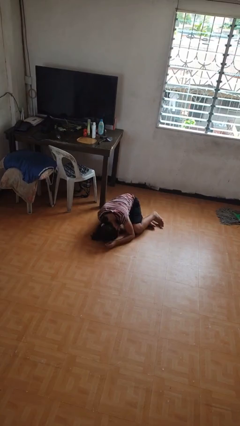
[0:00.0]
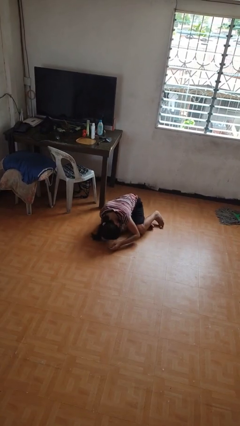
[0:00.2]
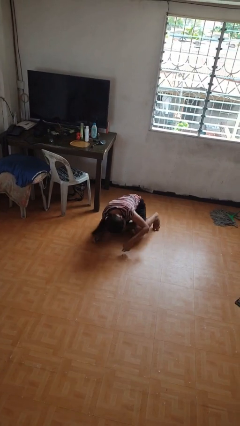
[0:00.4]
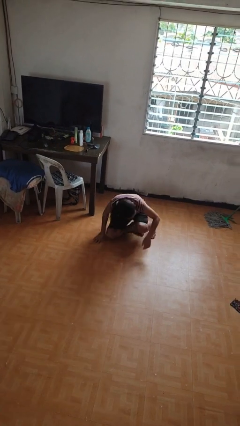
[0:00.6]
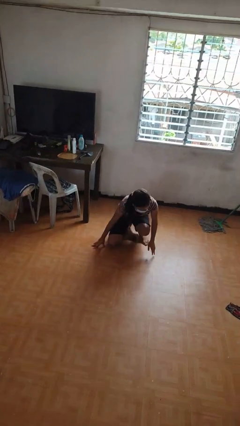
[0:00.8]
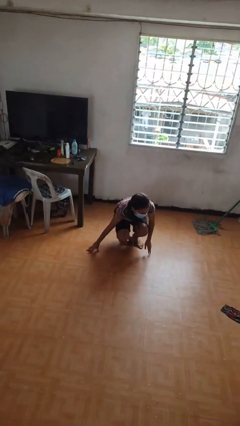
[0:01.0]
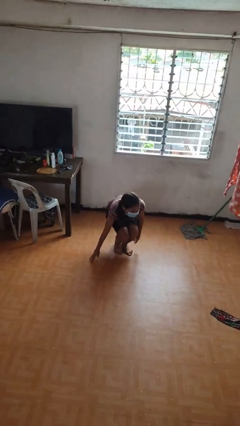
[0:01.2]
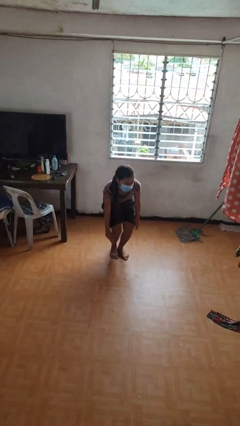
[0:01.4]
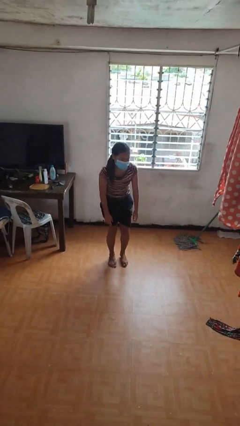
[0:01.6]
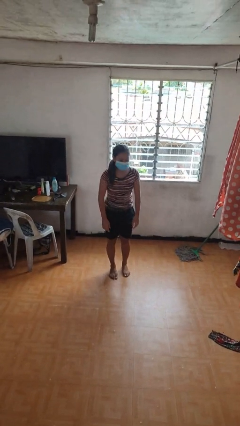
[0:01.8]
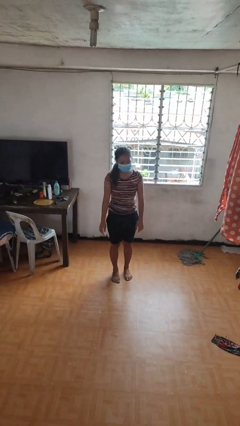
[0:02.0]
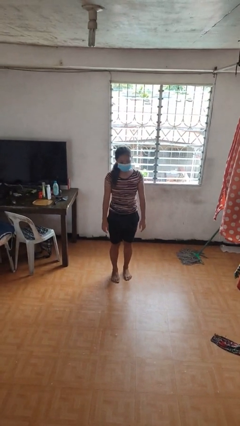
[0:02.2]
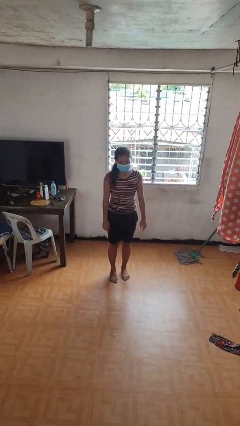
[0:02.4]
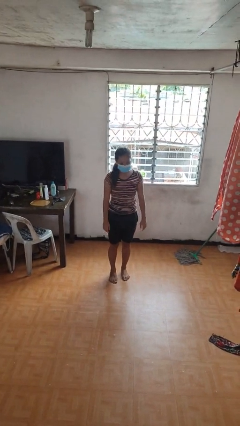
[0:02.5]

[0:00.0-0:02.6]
person stands up from floor

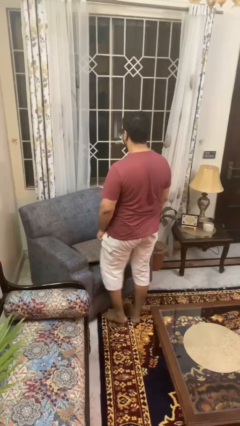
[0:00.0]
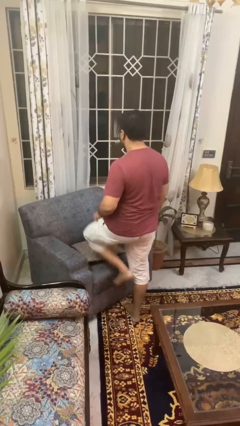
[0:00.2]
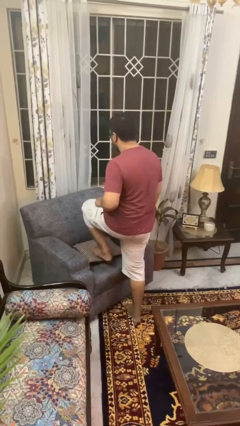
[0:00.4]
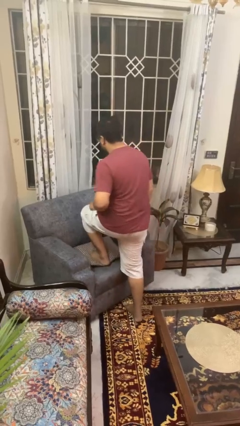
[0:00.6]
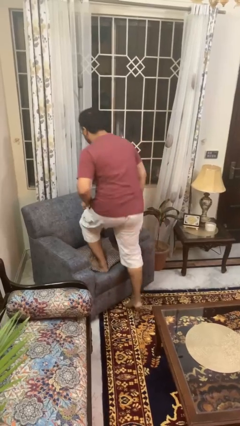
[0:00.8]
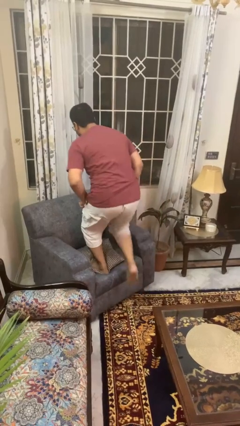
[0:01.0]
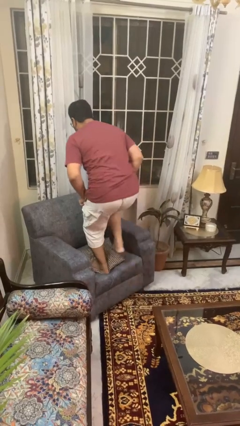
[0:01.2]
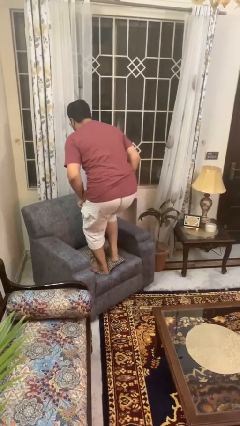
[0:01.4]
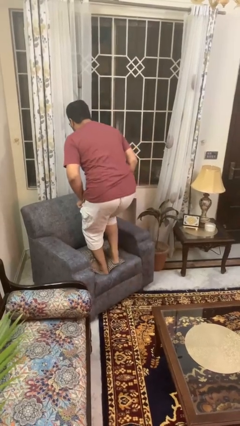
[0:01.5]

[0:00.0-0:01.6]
person climbs on couch

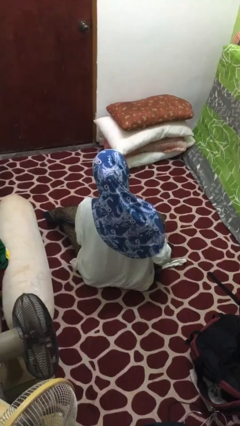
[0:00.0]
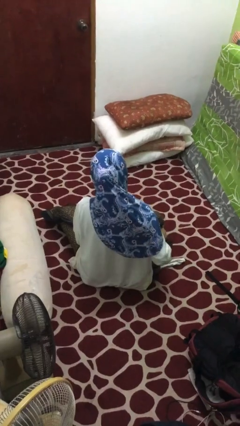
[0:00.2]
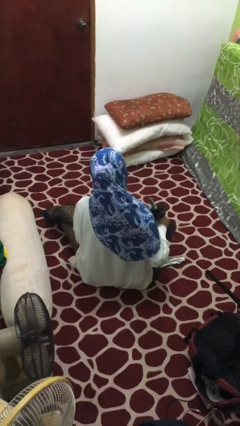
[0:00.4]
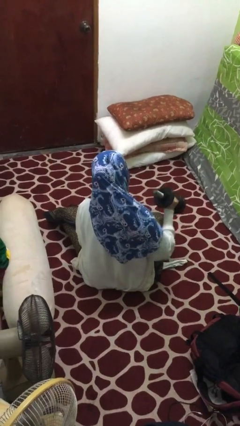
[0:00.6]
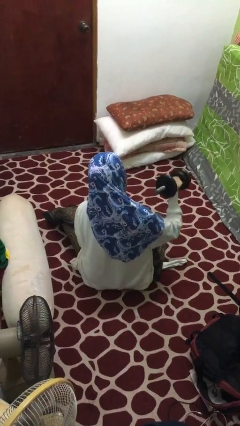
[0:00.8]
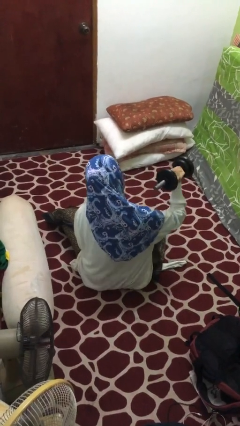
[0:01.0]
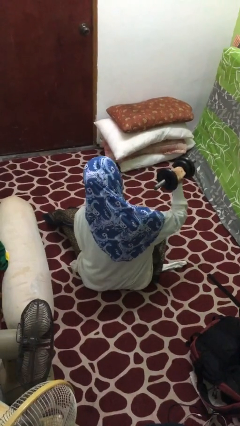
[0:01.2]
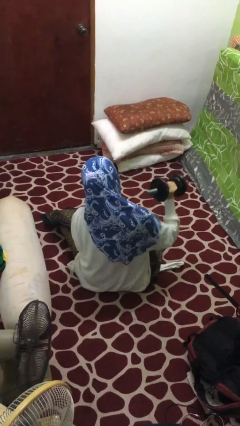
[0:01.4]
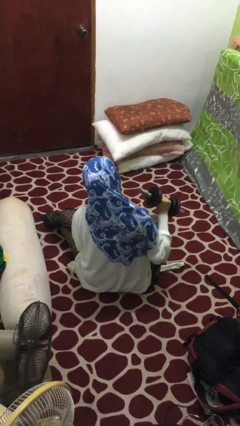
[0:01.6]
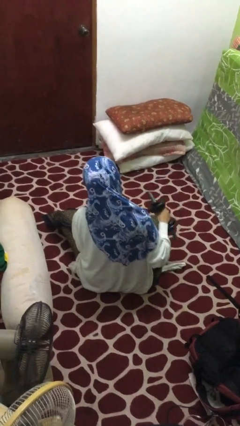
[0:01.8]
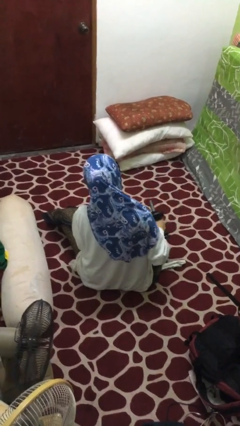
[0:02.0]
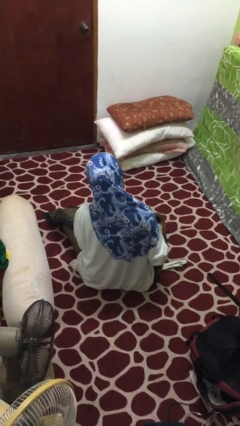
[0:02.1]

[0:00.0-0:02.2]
person lifts dumbbells

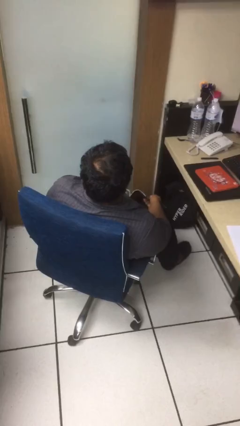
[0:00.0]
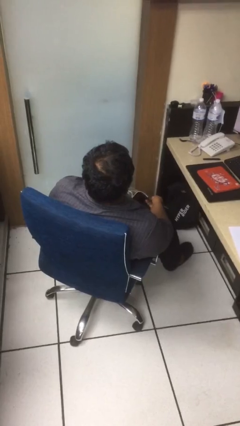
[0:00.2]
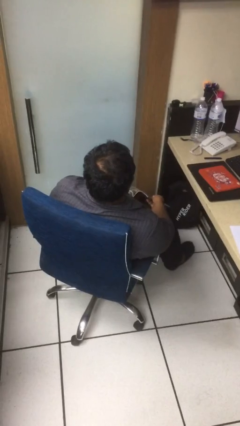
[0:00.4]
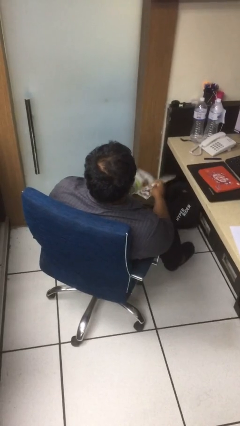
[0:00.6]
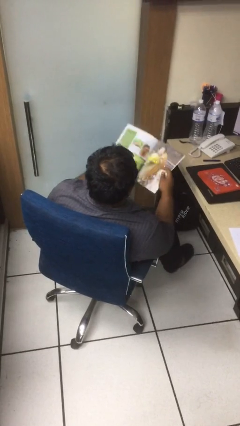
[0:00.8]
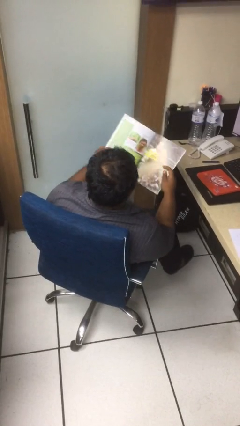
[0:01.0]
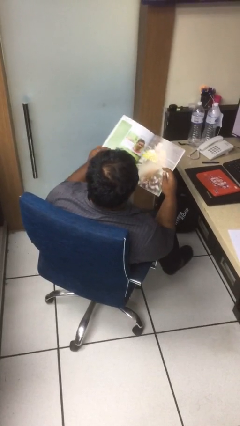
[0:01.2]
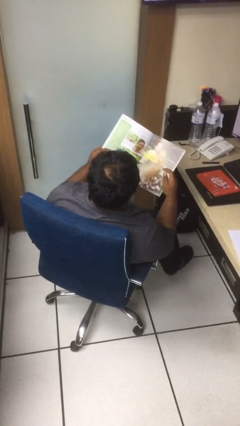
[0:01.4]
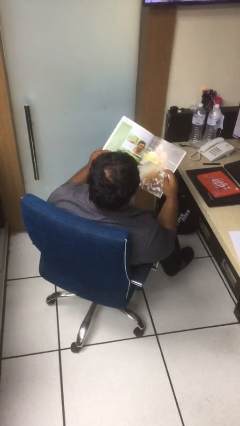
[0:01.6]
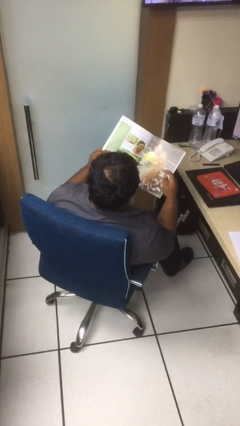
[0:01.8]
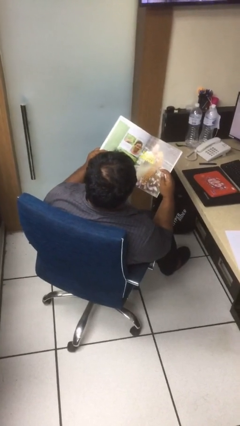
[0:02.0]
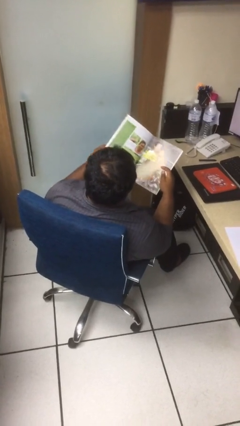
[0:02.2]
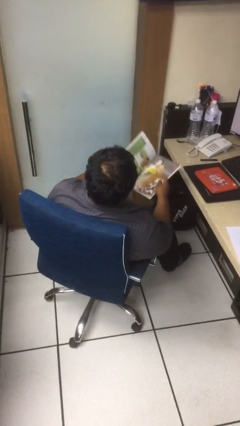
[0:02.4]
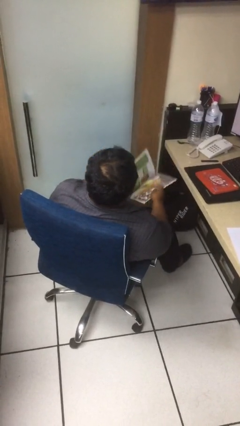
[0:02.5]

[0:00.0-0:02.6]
person reads magazine

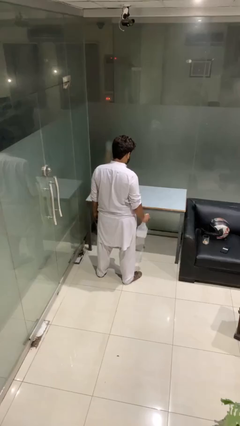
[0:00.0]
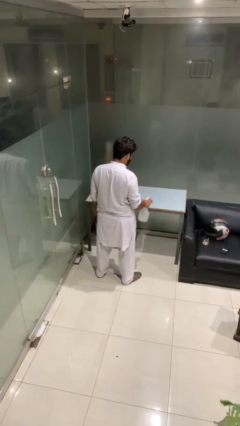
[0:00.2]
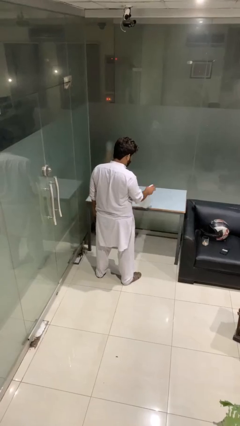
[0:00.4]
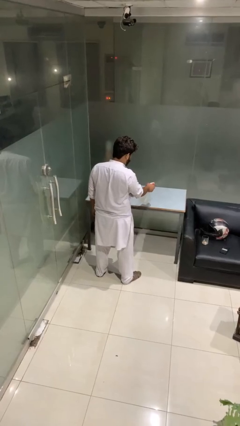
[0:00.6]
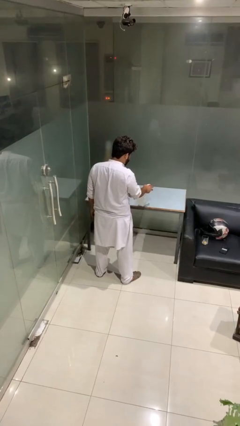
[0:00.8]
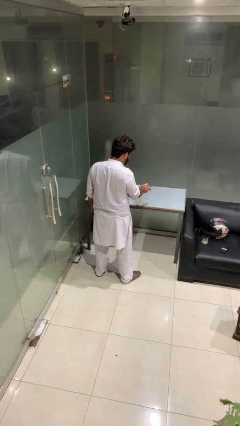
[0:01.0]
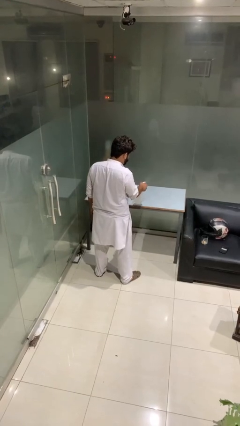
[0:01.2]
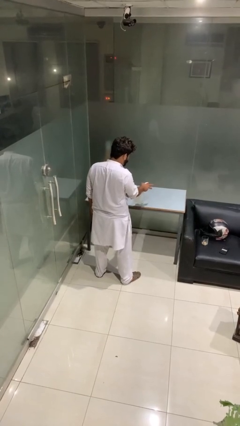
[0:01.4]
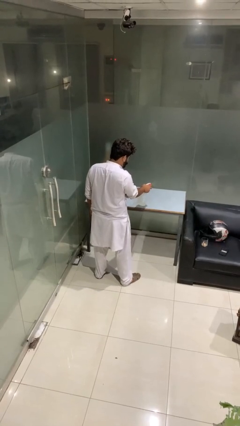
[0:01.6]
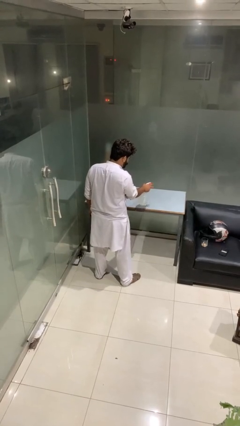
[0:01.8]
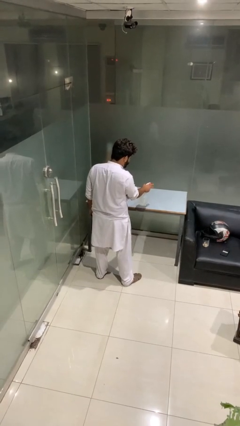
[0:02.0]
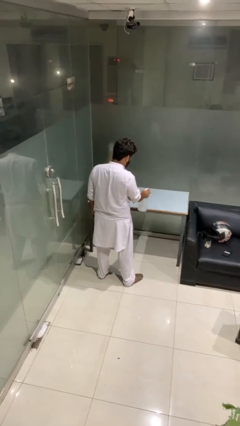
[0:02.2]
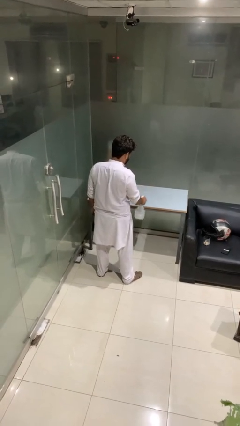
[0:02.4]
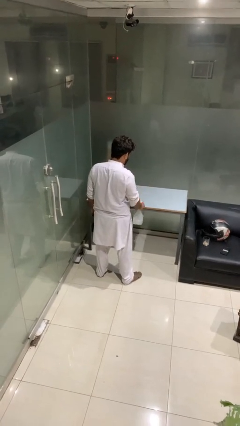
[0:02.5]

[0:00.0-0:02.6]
person sprays from bottle

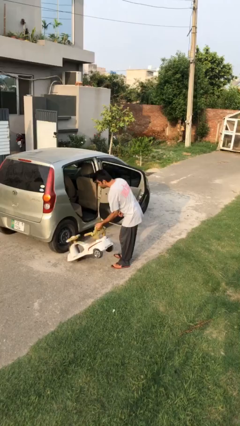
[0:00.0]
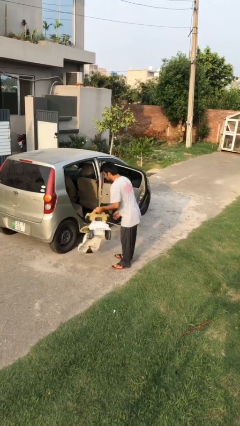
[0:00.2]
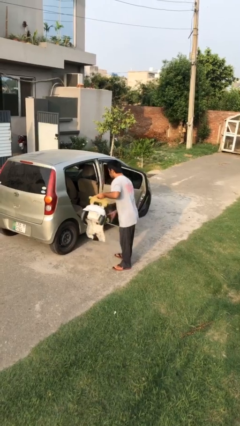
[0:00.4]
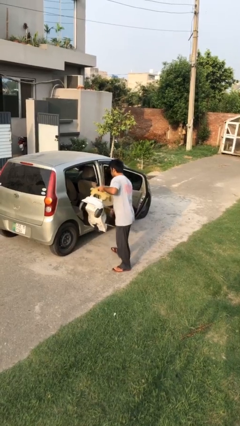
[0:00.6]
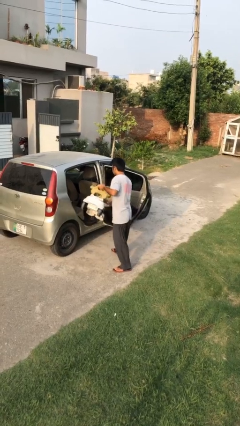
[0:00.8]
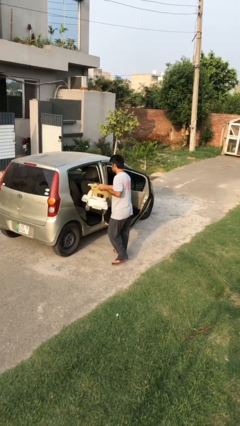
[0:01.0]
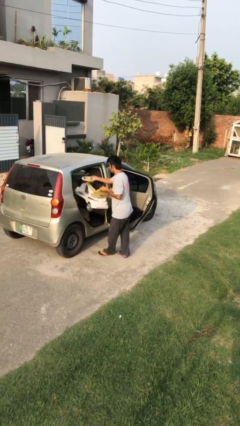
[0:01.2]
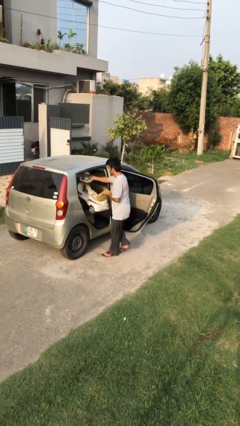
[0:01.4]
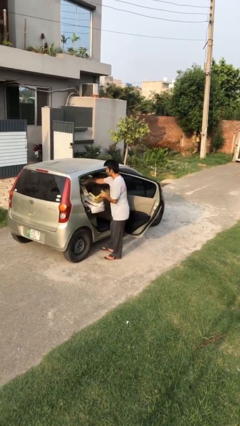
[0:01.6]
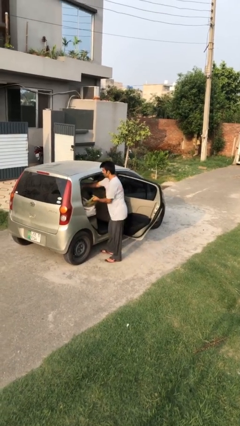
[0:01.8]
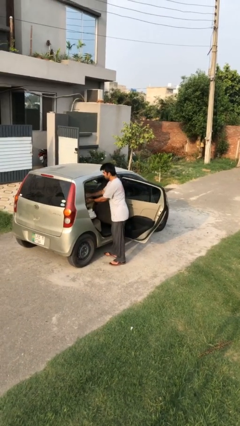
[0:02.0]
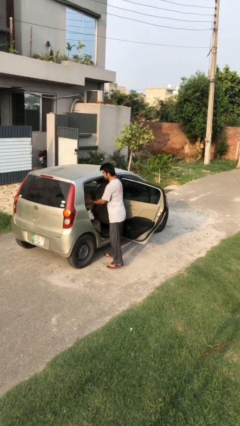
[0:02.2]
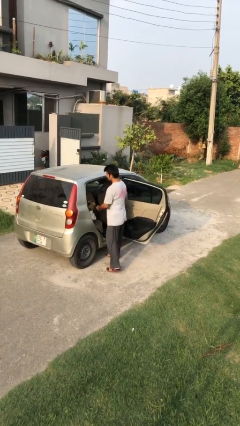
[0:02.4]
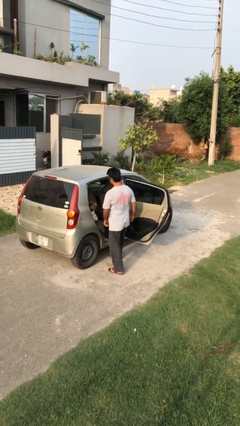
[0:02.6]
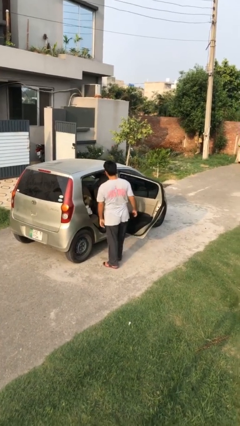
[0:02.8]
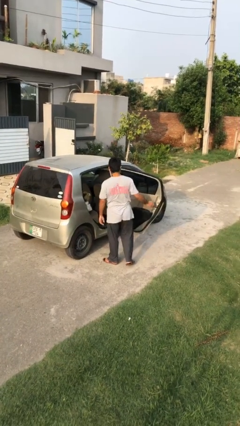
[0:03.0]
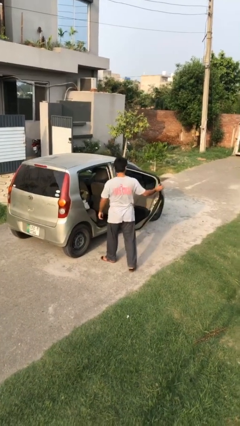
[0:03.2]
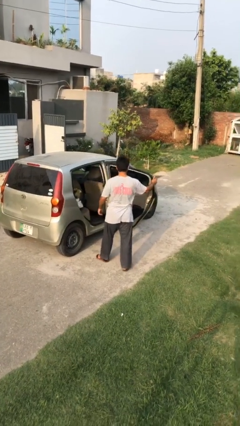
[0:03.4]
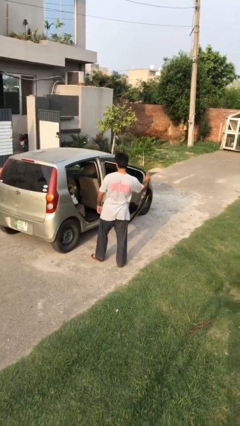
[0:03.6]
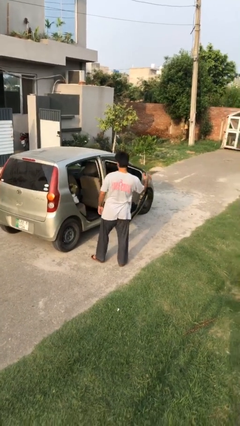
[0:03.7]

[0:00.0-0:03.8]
person loads car

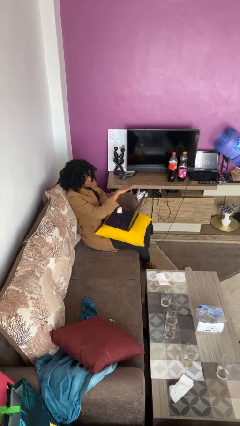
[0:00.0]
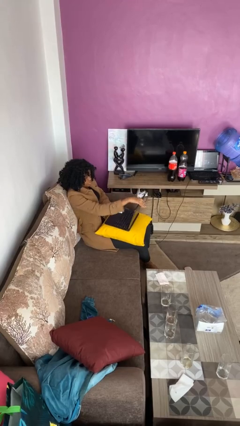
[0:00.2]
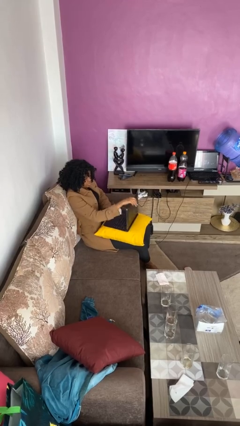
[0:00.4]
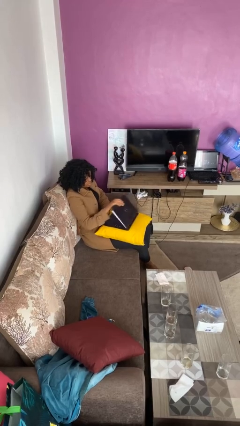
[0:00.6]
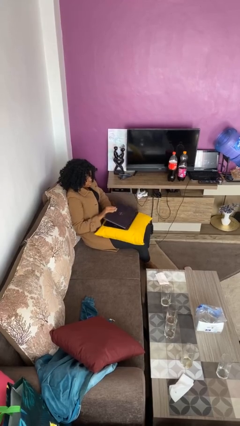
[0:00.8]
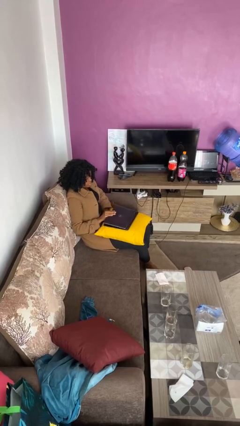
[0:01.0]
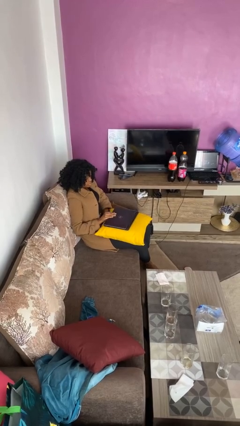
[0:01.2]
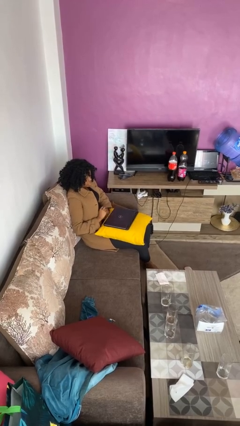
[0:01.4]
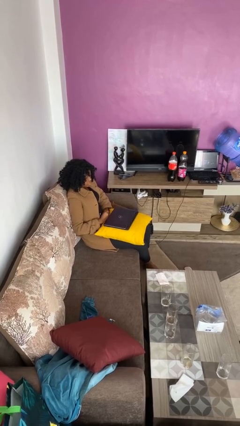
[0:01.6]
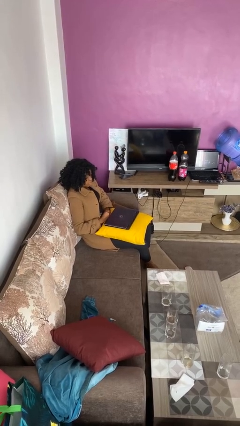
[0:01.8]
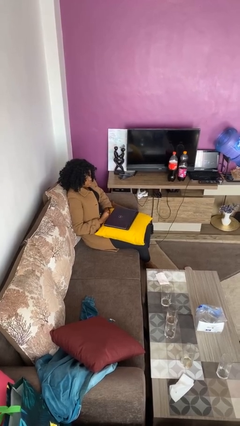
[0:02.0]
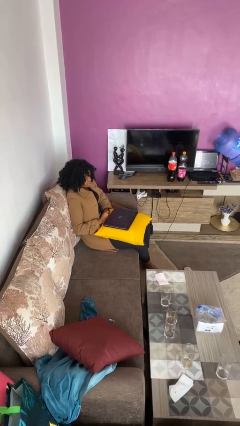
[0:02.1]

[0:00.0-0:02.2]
person closes laptop
